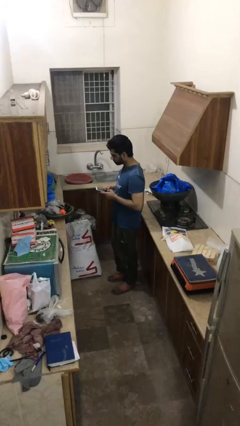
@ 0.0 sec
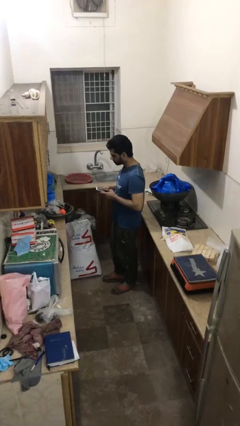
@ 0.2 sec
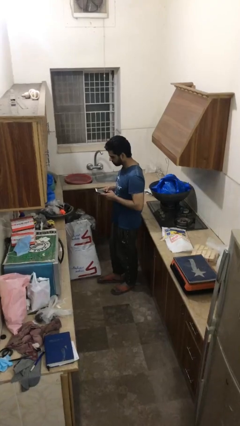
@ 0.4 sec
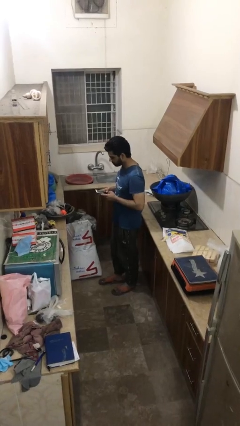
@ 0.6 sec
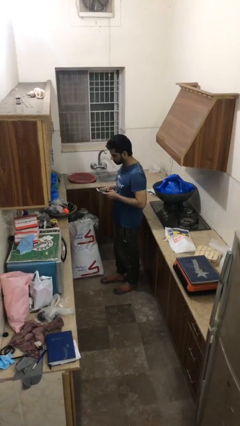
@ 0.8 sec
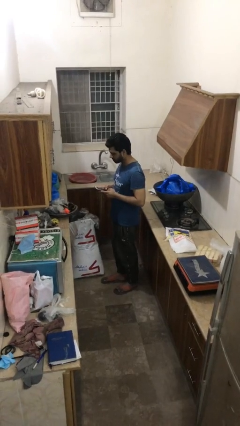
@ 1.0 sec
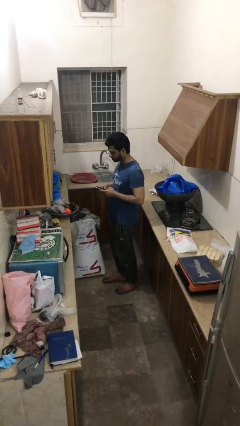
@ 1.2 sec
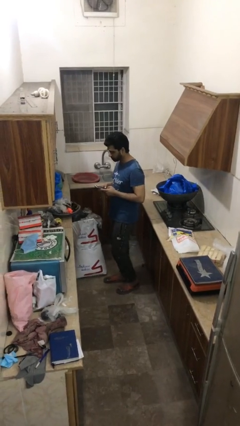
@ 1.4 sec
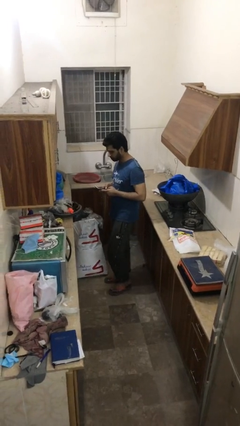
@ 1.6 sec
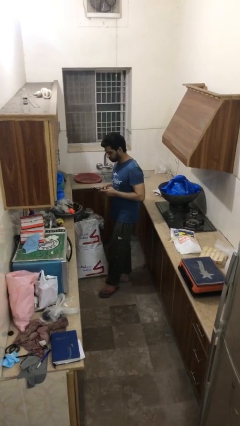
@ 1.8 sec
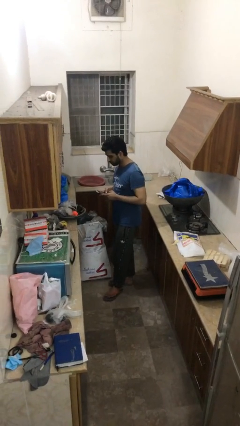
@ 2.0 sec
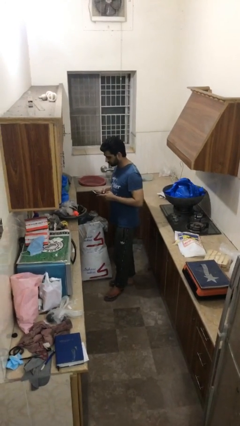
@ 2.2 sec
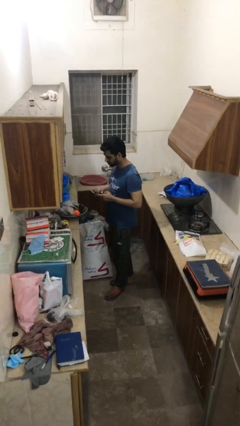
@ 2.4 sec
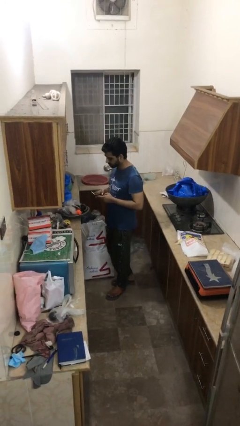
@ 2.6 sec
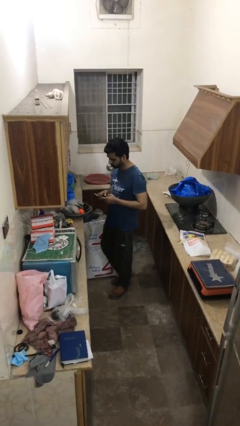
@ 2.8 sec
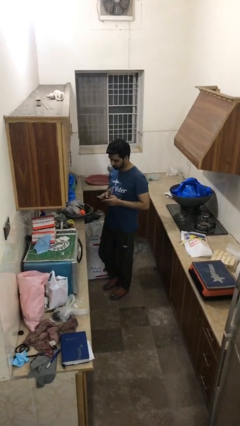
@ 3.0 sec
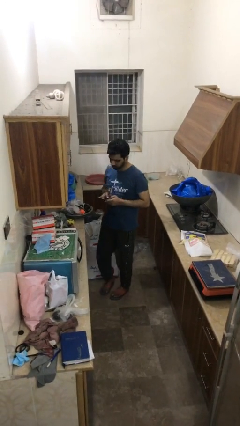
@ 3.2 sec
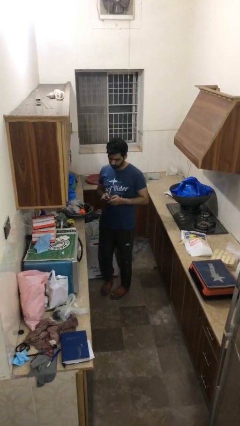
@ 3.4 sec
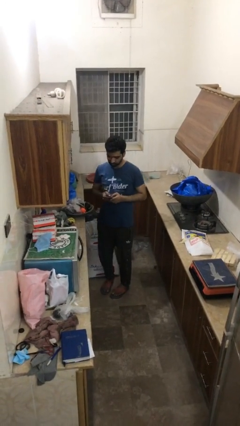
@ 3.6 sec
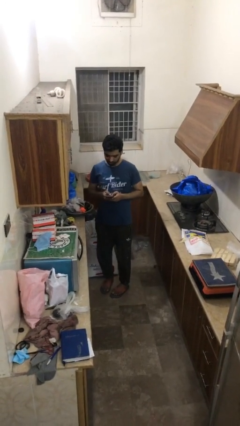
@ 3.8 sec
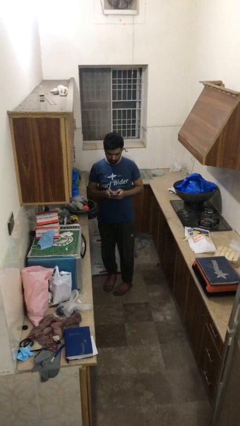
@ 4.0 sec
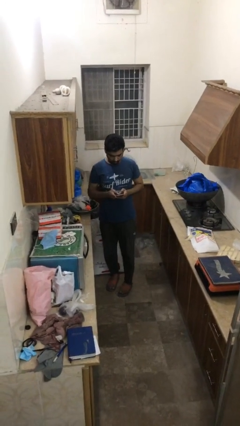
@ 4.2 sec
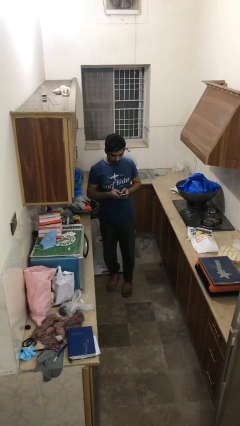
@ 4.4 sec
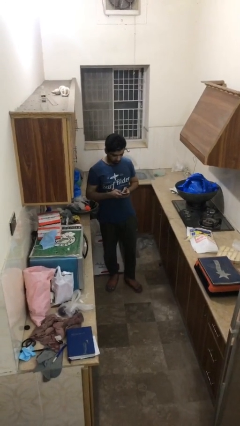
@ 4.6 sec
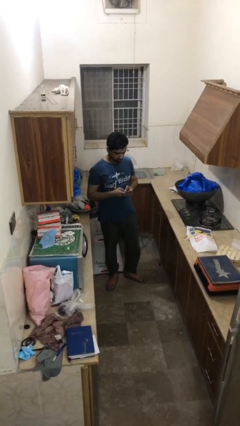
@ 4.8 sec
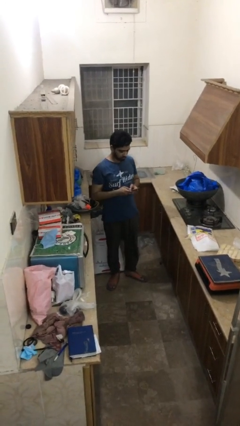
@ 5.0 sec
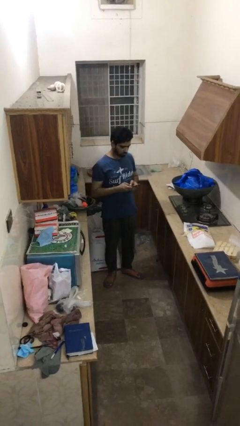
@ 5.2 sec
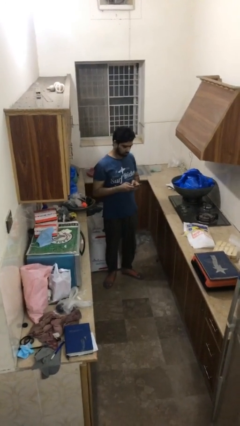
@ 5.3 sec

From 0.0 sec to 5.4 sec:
person texts on phone

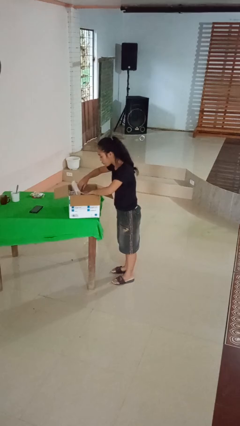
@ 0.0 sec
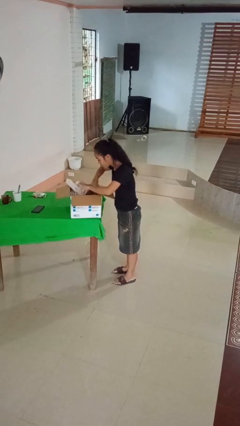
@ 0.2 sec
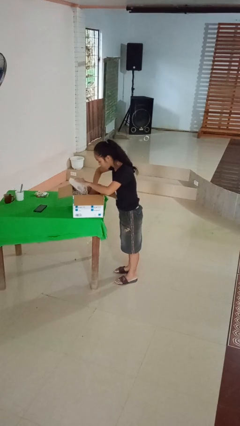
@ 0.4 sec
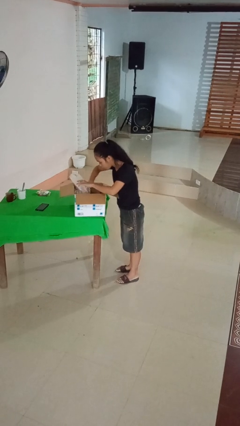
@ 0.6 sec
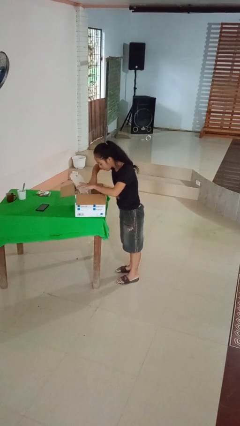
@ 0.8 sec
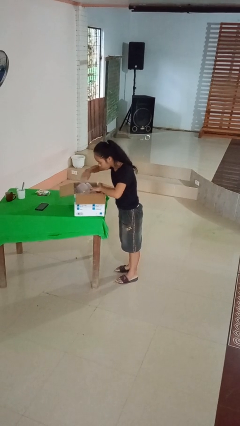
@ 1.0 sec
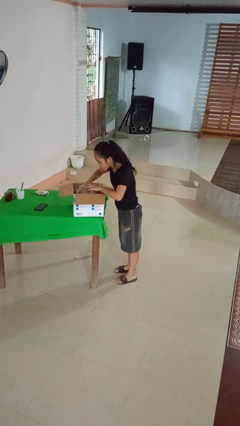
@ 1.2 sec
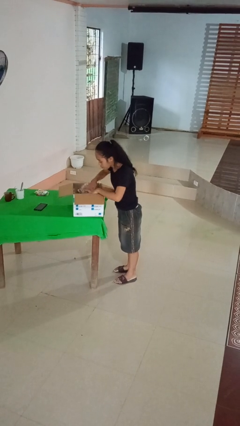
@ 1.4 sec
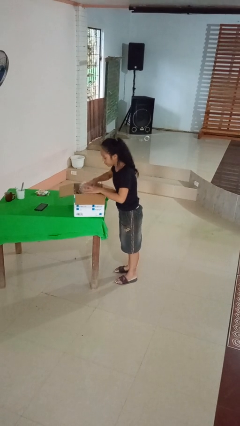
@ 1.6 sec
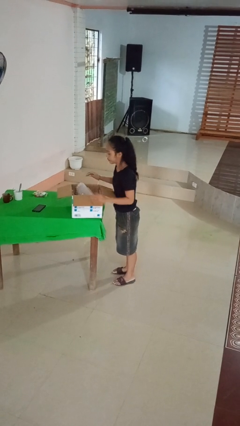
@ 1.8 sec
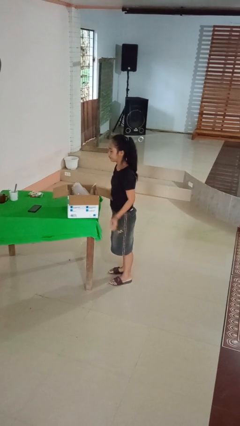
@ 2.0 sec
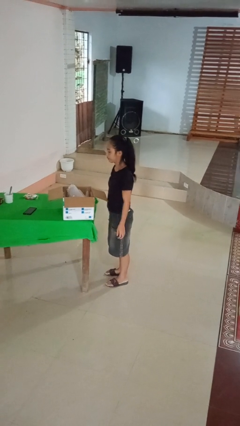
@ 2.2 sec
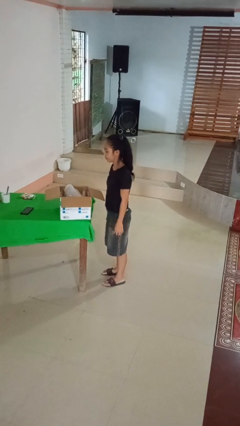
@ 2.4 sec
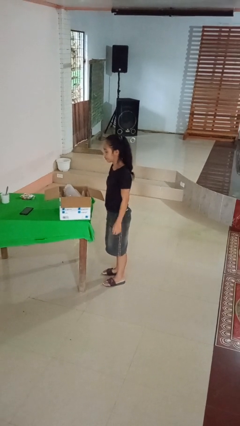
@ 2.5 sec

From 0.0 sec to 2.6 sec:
person searches in box

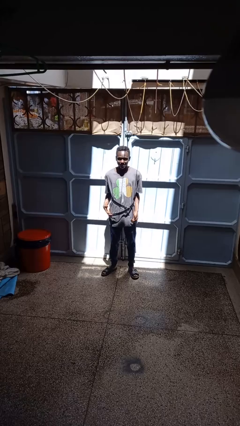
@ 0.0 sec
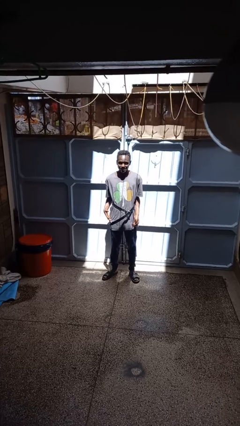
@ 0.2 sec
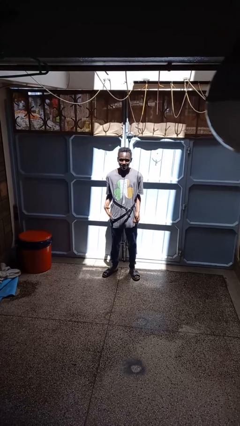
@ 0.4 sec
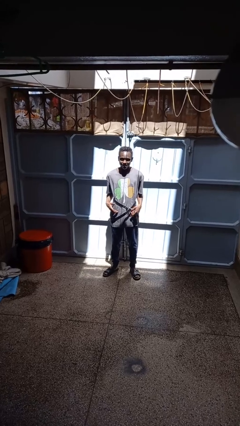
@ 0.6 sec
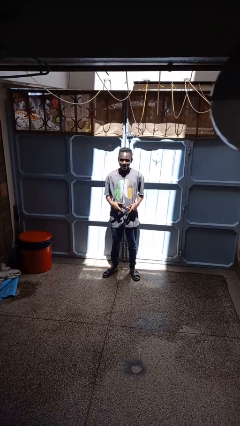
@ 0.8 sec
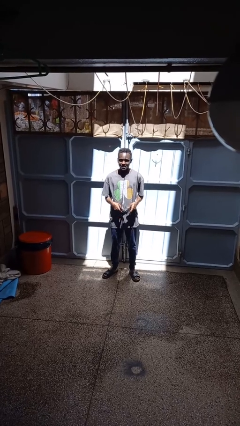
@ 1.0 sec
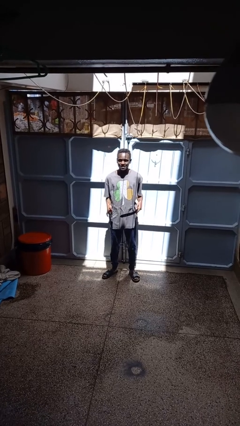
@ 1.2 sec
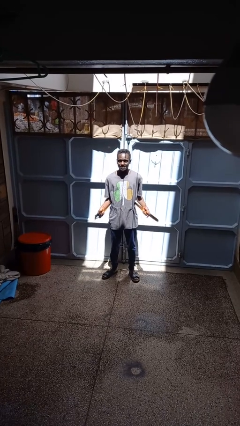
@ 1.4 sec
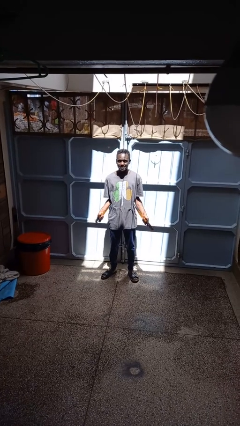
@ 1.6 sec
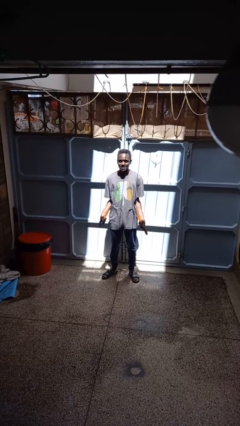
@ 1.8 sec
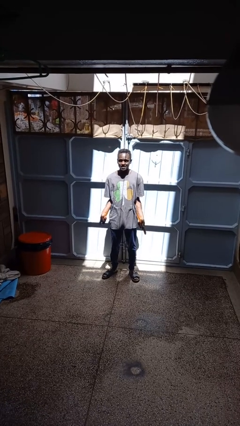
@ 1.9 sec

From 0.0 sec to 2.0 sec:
person takes off belt

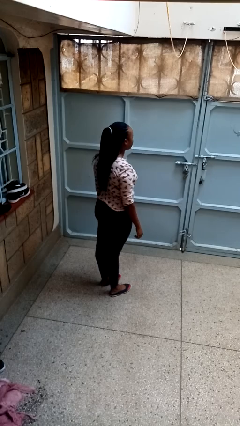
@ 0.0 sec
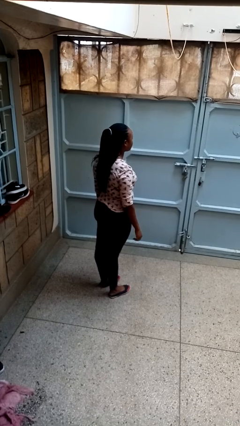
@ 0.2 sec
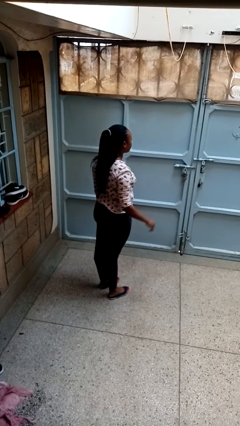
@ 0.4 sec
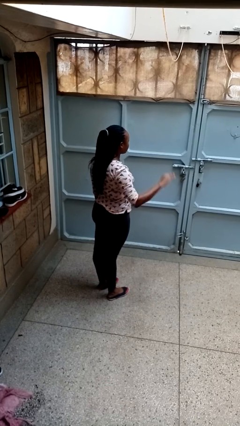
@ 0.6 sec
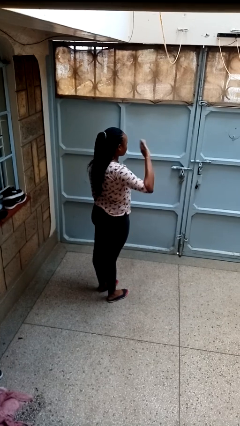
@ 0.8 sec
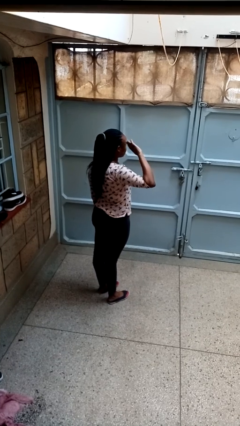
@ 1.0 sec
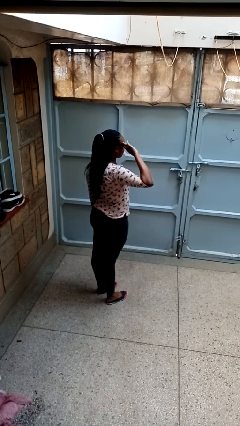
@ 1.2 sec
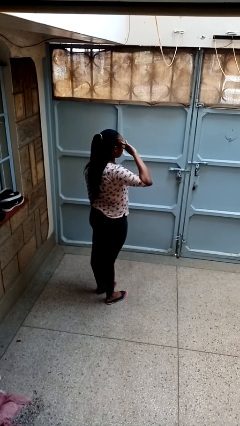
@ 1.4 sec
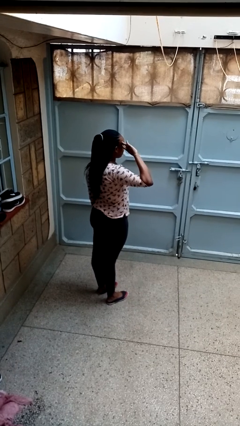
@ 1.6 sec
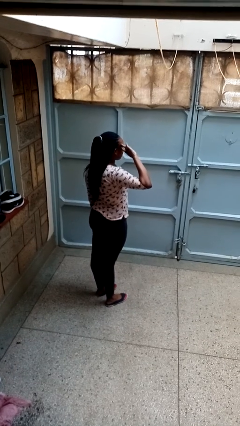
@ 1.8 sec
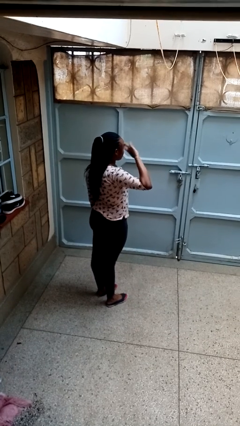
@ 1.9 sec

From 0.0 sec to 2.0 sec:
person salutes

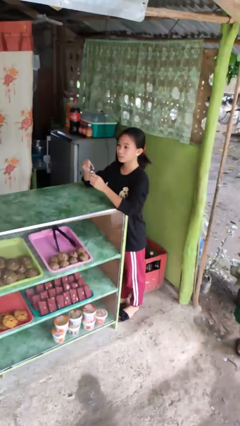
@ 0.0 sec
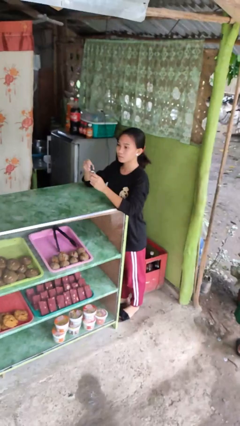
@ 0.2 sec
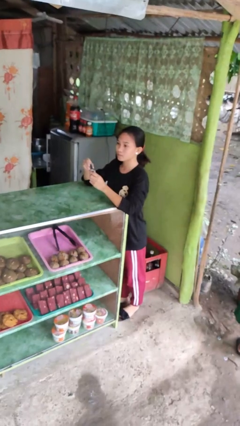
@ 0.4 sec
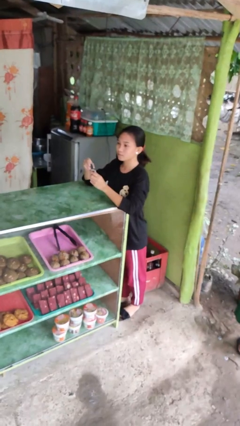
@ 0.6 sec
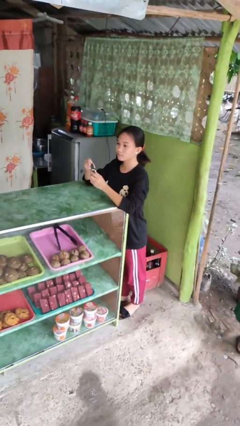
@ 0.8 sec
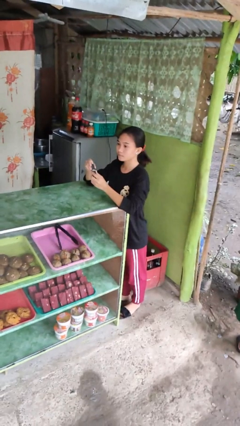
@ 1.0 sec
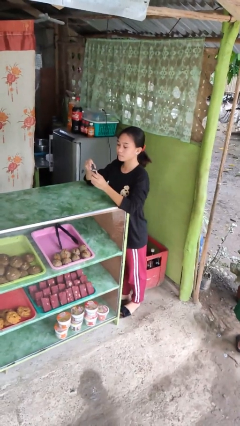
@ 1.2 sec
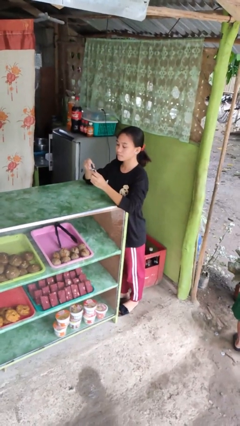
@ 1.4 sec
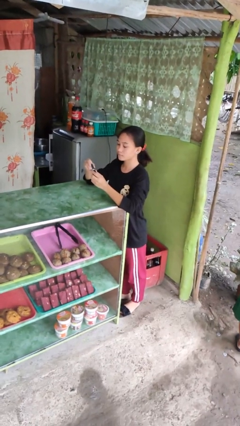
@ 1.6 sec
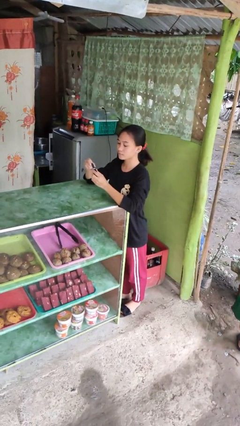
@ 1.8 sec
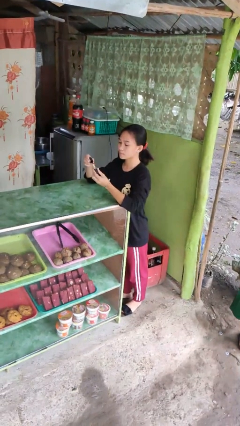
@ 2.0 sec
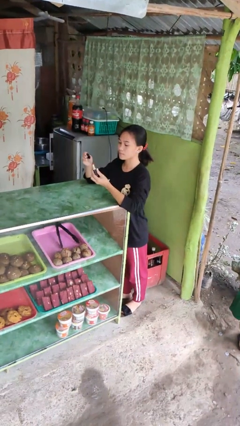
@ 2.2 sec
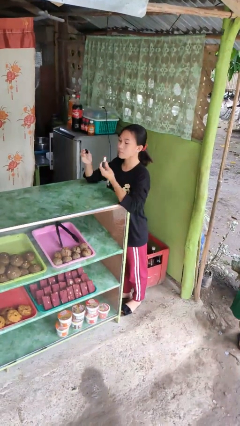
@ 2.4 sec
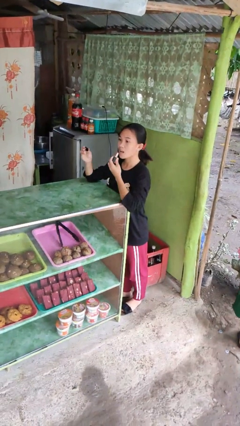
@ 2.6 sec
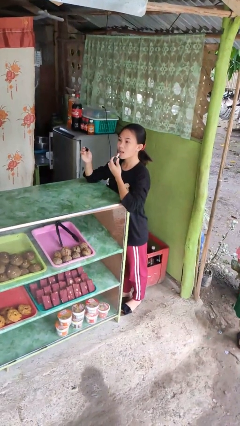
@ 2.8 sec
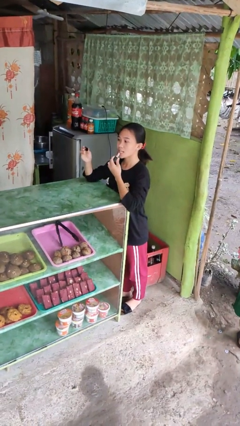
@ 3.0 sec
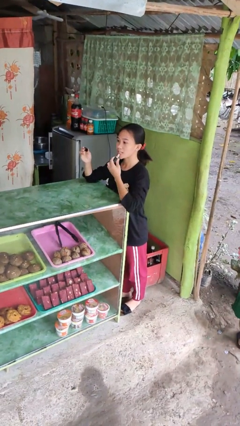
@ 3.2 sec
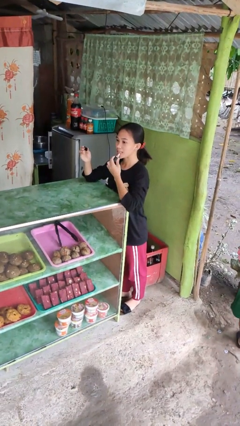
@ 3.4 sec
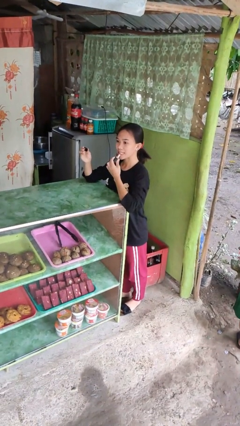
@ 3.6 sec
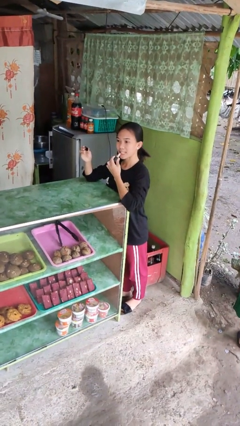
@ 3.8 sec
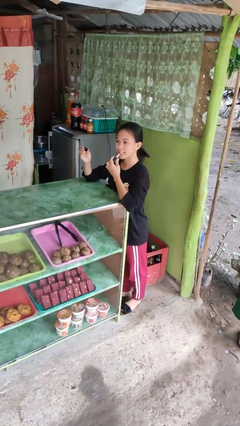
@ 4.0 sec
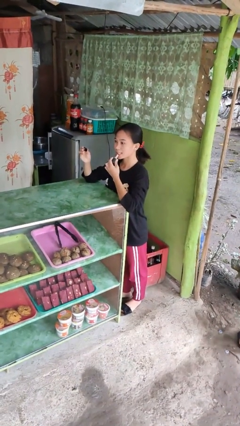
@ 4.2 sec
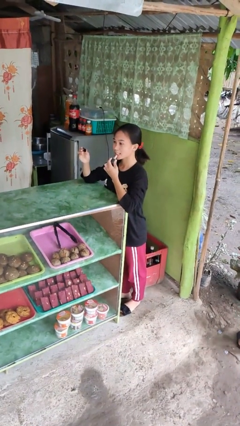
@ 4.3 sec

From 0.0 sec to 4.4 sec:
person applies lip makeup

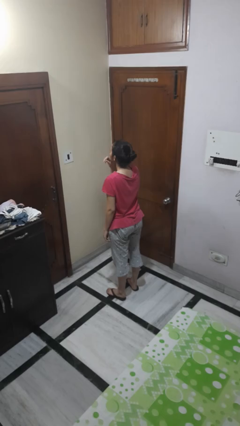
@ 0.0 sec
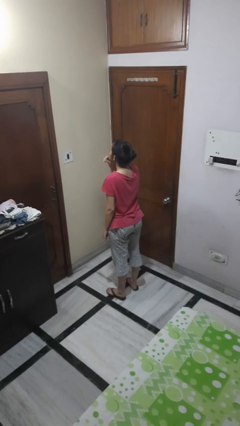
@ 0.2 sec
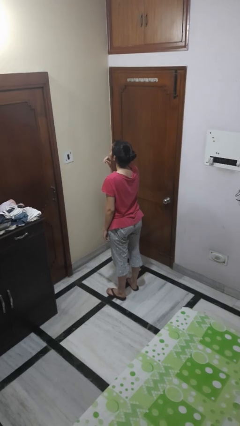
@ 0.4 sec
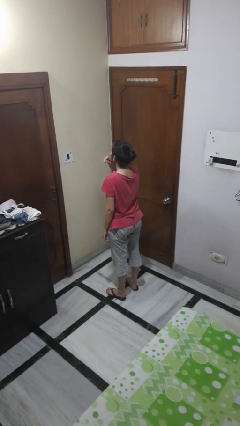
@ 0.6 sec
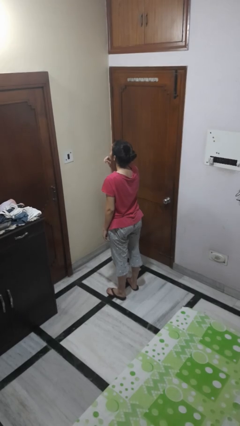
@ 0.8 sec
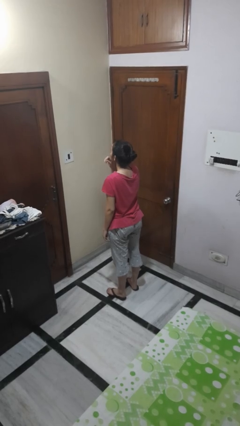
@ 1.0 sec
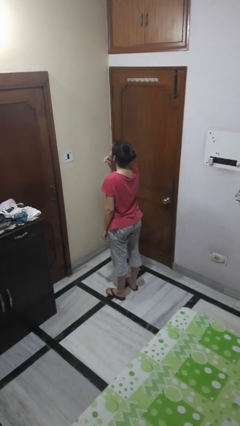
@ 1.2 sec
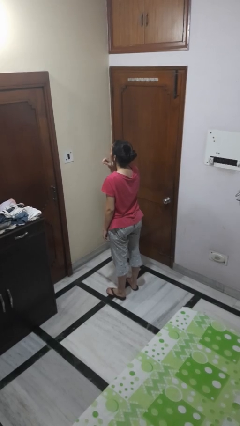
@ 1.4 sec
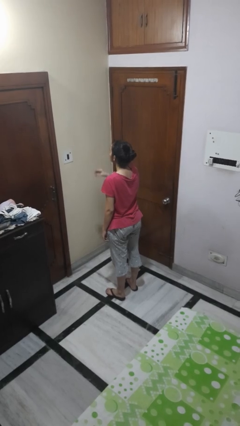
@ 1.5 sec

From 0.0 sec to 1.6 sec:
person gestures be quiet
